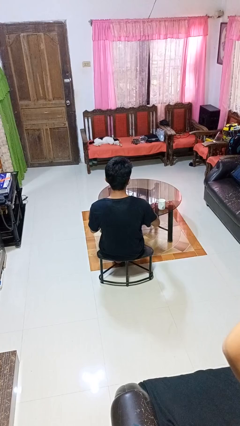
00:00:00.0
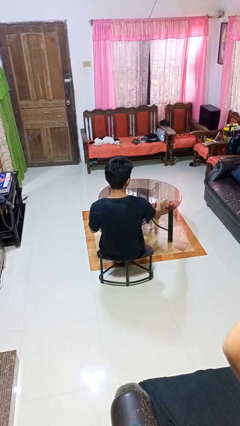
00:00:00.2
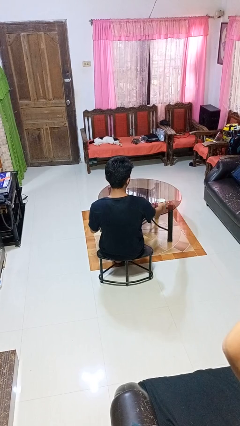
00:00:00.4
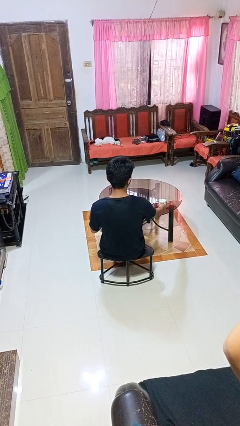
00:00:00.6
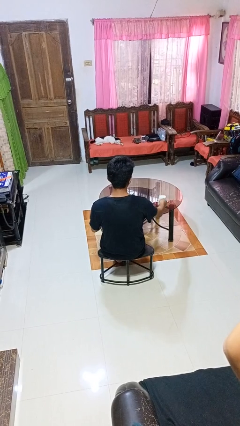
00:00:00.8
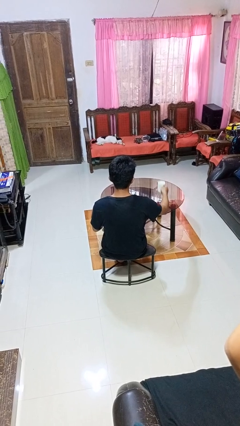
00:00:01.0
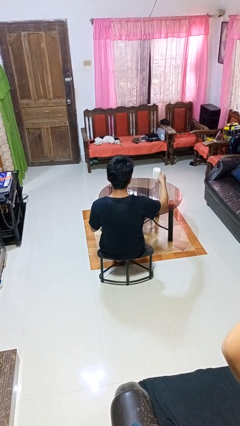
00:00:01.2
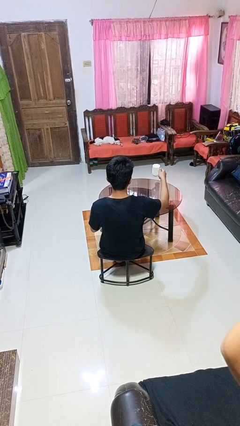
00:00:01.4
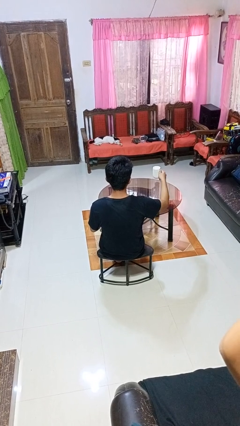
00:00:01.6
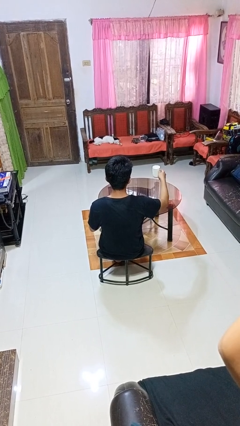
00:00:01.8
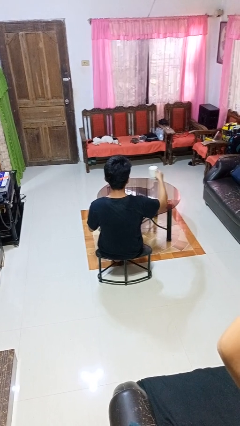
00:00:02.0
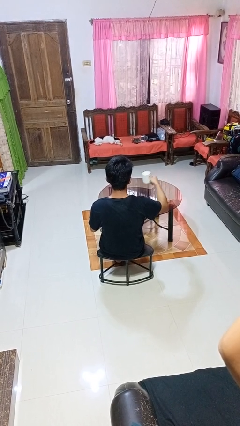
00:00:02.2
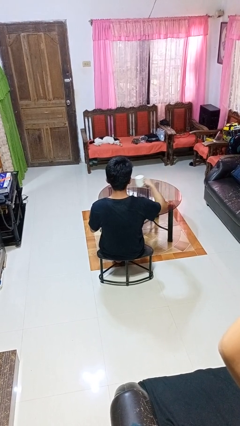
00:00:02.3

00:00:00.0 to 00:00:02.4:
person picks up object from table

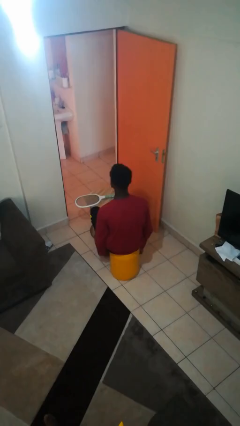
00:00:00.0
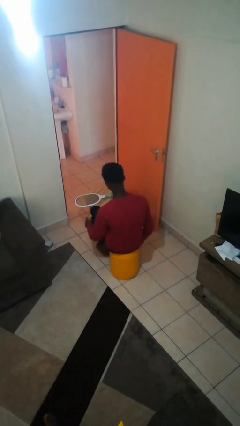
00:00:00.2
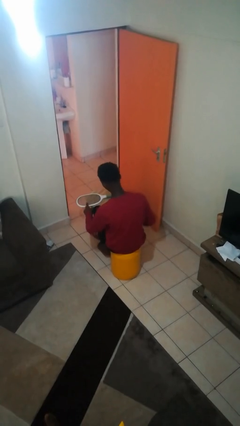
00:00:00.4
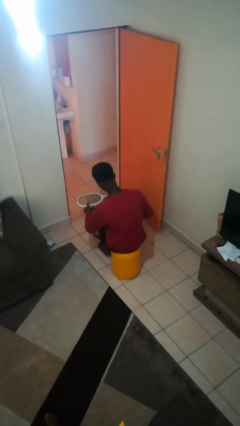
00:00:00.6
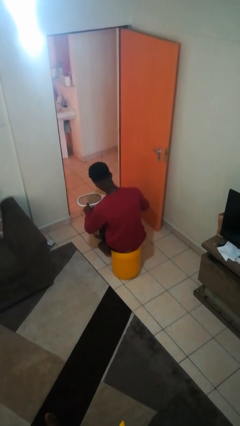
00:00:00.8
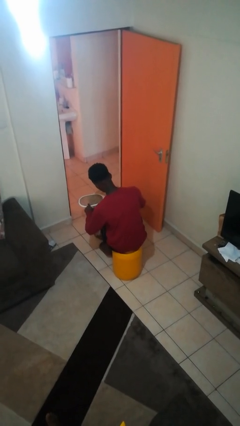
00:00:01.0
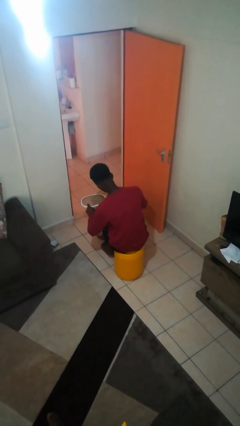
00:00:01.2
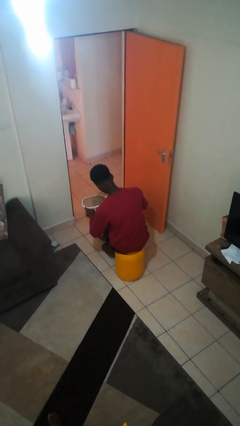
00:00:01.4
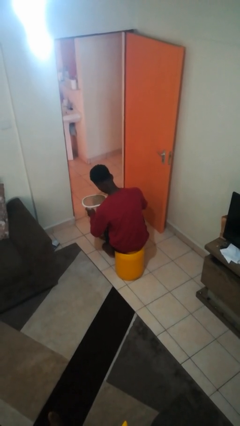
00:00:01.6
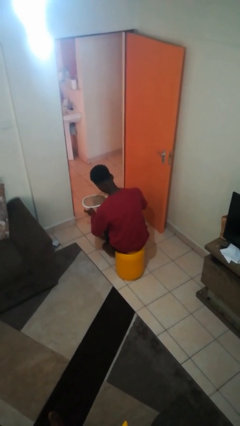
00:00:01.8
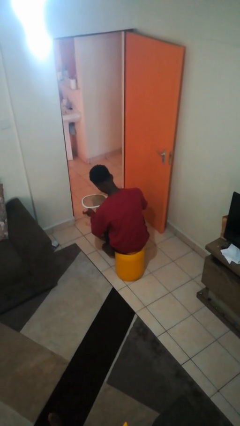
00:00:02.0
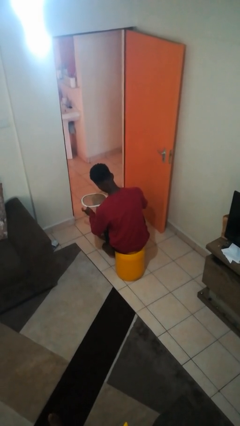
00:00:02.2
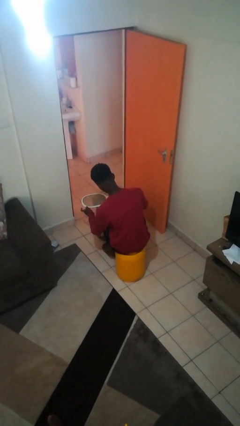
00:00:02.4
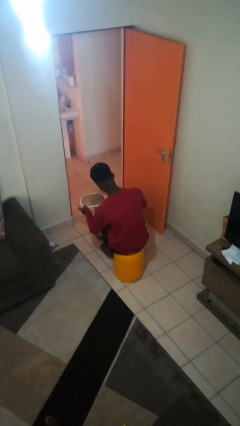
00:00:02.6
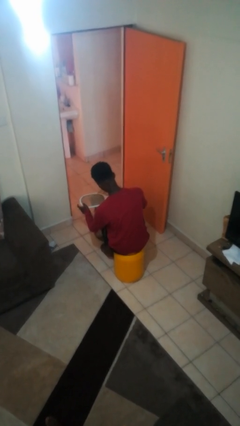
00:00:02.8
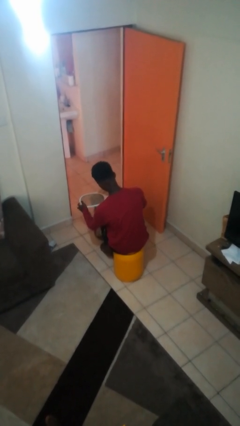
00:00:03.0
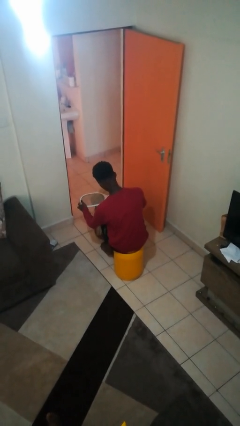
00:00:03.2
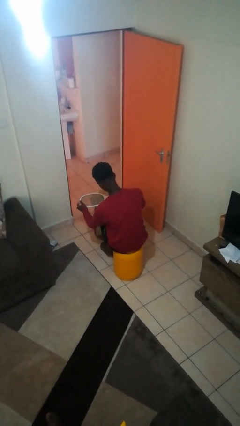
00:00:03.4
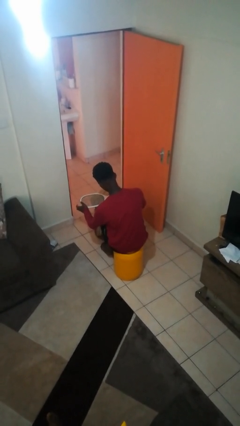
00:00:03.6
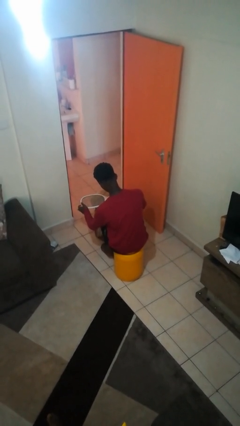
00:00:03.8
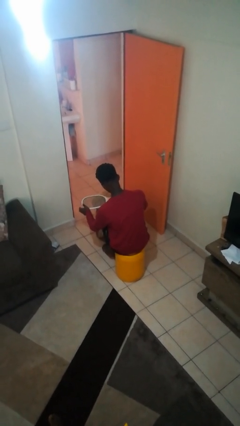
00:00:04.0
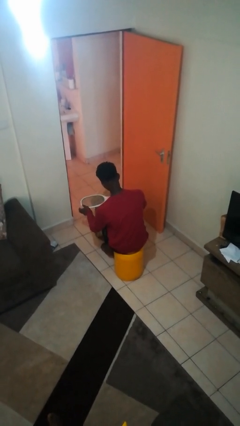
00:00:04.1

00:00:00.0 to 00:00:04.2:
person taps object with finger

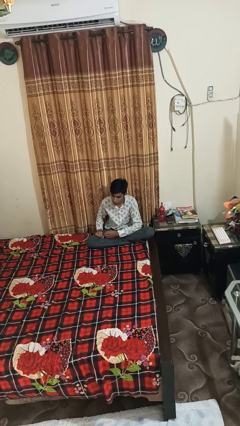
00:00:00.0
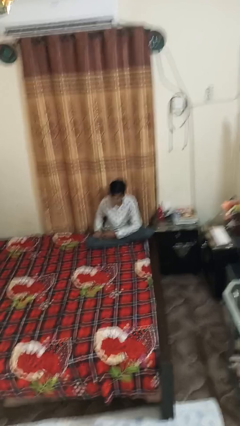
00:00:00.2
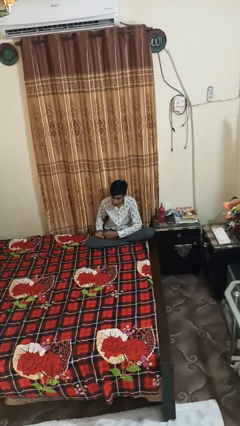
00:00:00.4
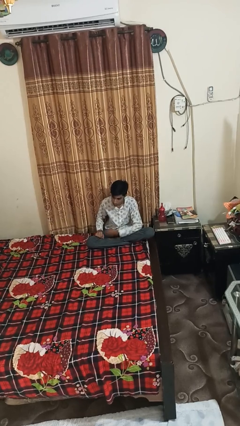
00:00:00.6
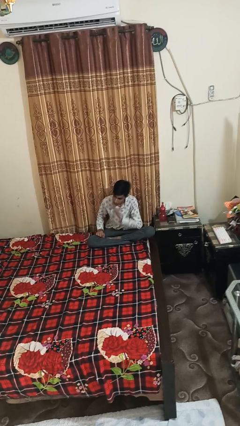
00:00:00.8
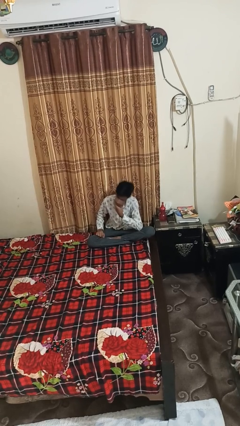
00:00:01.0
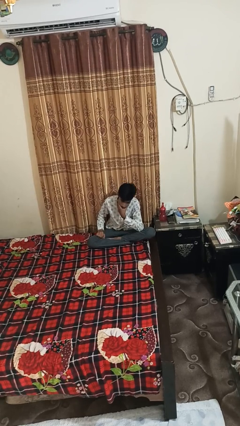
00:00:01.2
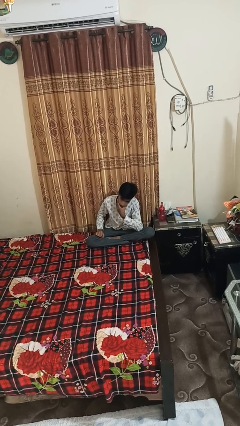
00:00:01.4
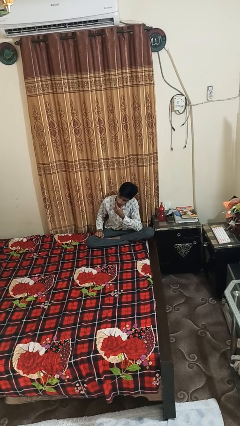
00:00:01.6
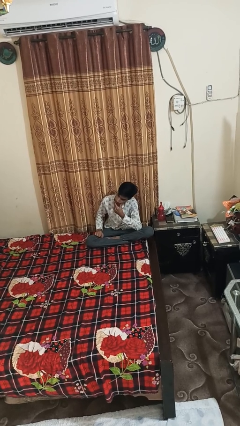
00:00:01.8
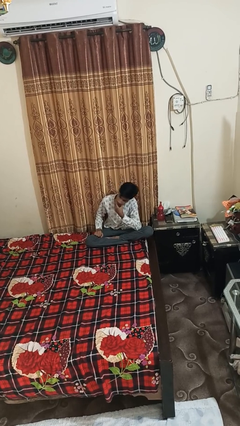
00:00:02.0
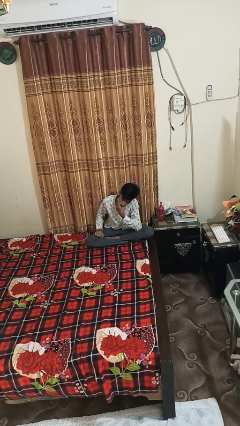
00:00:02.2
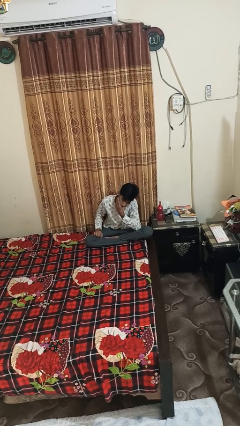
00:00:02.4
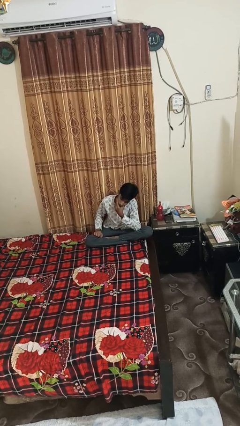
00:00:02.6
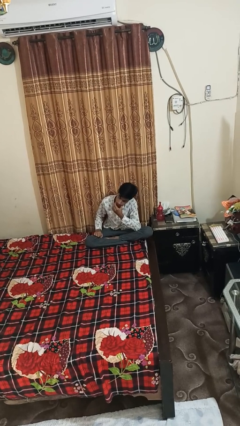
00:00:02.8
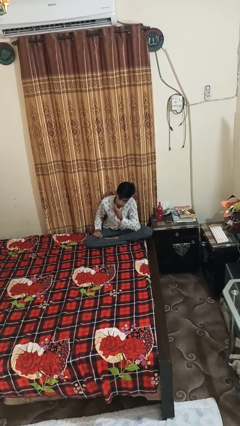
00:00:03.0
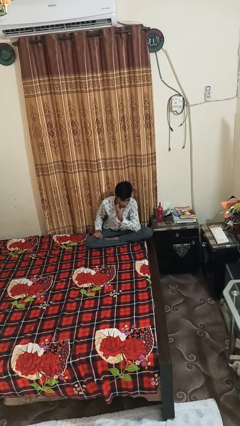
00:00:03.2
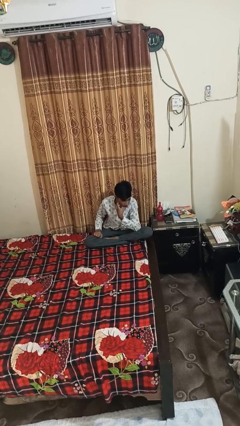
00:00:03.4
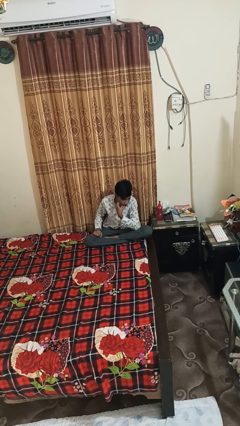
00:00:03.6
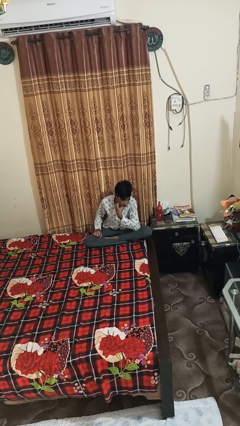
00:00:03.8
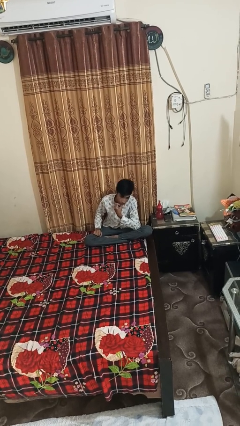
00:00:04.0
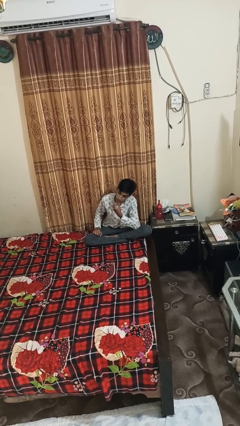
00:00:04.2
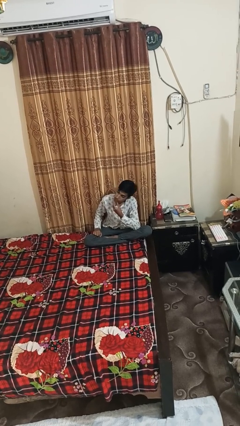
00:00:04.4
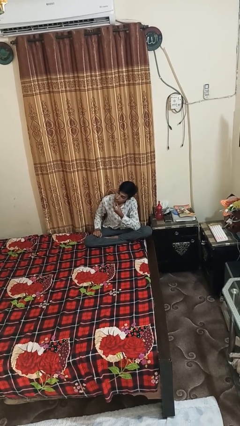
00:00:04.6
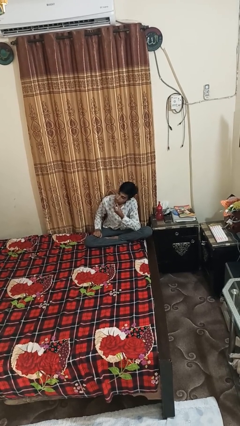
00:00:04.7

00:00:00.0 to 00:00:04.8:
person strokes chin

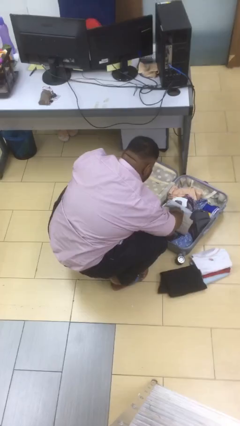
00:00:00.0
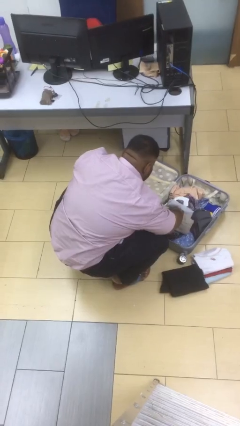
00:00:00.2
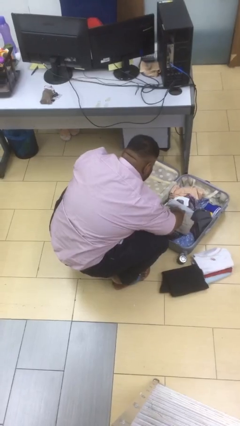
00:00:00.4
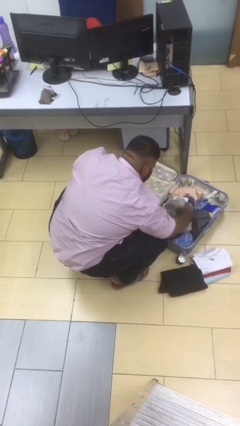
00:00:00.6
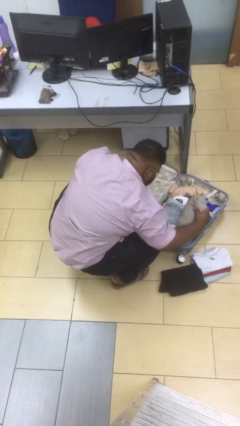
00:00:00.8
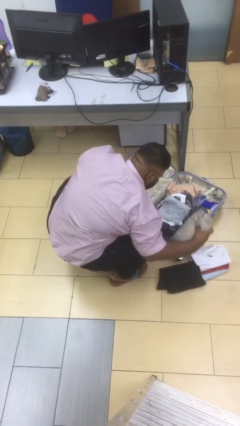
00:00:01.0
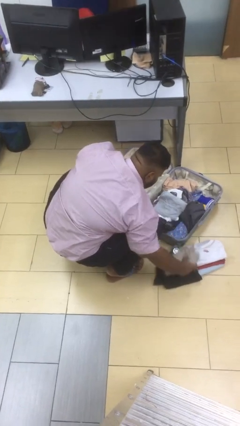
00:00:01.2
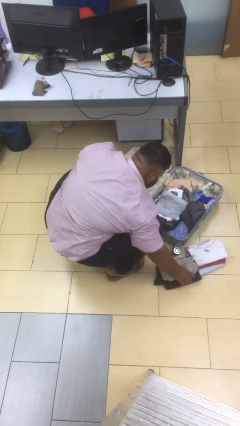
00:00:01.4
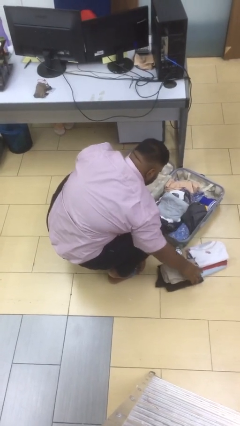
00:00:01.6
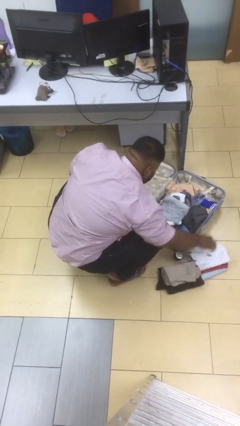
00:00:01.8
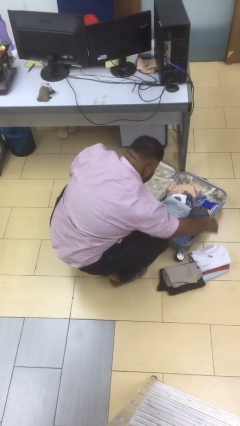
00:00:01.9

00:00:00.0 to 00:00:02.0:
person unloads clothes from suitcase

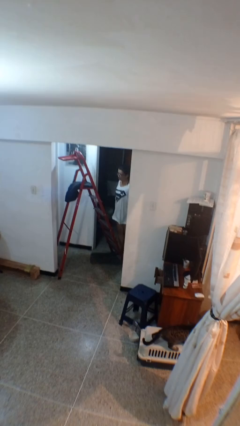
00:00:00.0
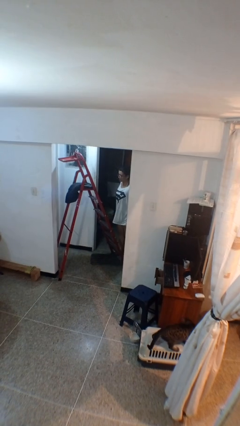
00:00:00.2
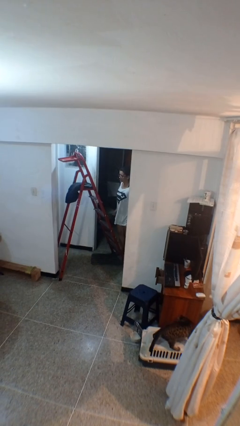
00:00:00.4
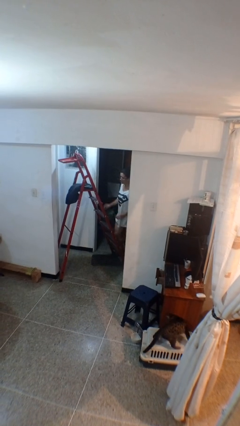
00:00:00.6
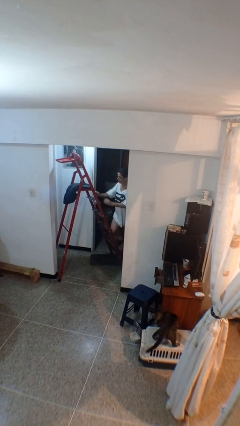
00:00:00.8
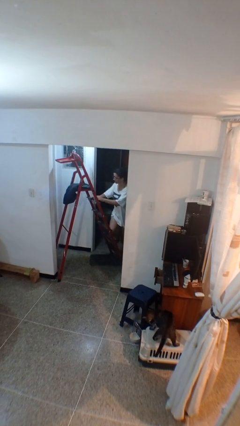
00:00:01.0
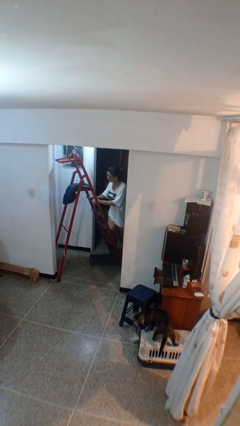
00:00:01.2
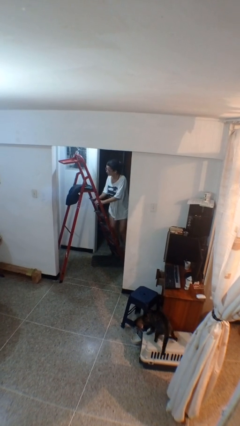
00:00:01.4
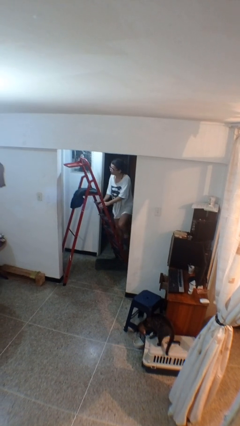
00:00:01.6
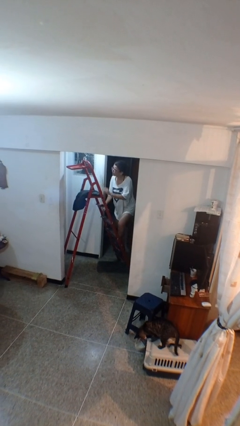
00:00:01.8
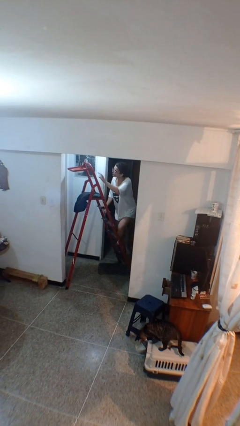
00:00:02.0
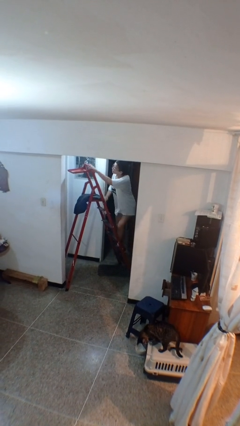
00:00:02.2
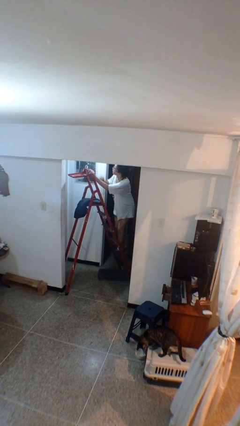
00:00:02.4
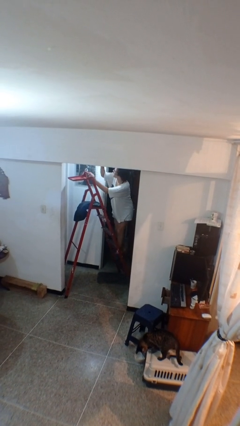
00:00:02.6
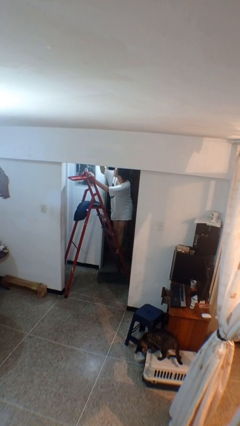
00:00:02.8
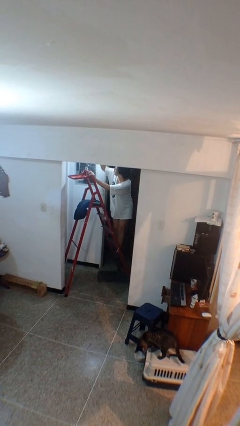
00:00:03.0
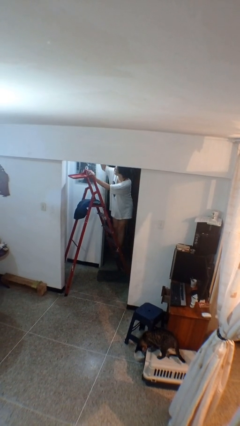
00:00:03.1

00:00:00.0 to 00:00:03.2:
person climbs up ladder

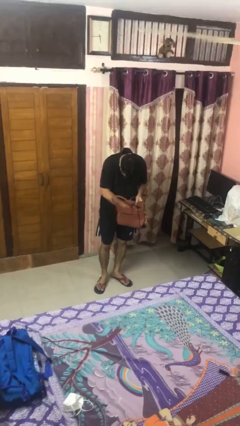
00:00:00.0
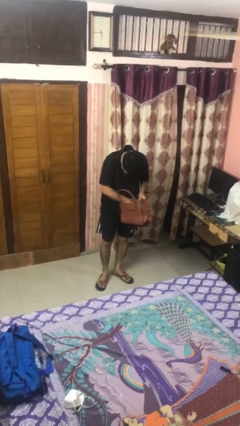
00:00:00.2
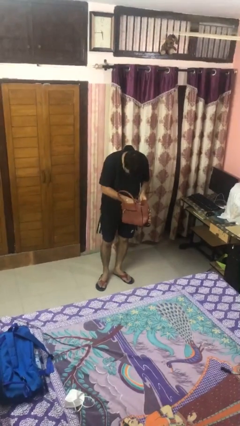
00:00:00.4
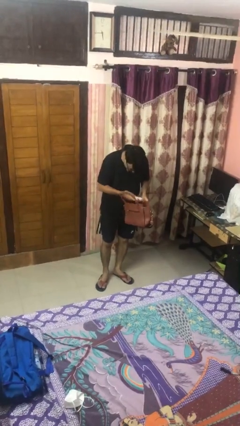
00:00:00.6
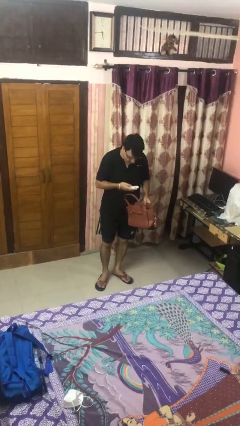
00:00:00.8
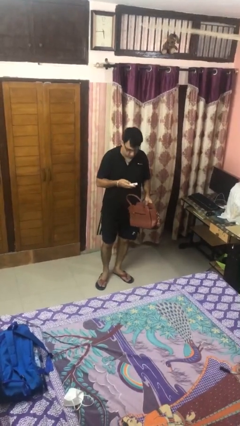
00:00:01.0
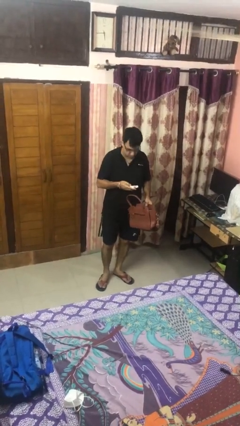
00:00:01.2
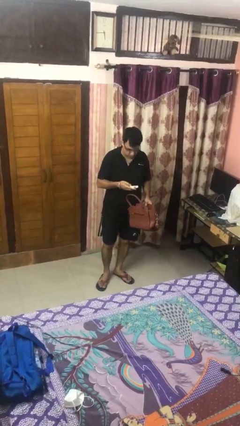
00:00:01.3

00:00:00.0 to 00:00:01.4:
person takes object from purse
